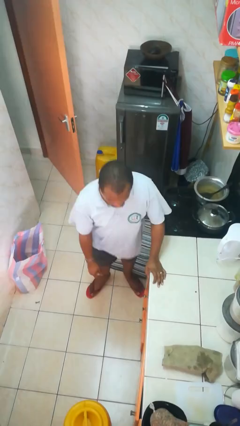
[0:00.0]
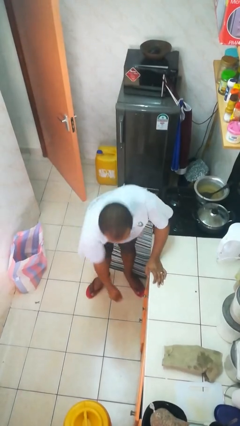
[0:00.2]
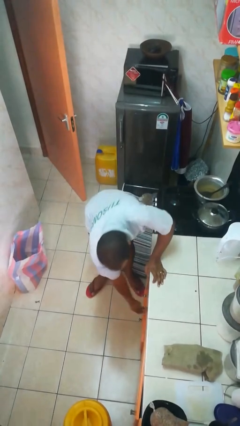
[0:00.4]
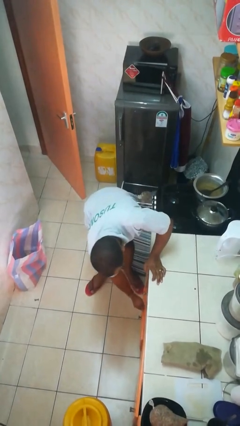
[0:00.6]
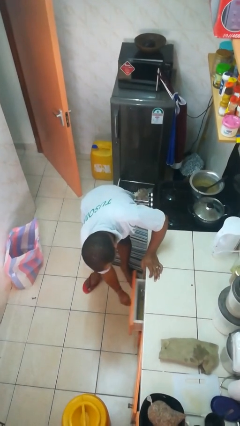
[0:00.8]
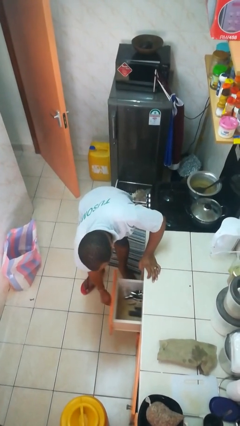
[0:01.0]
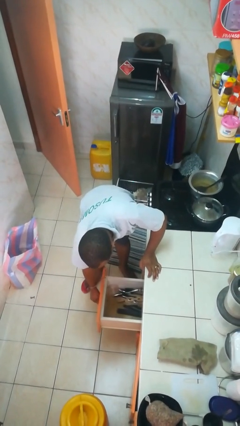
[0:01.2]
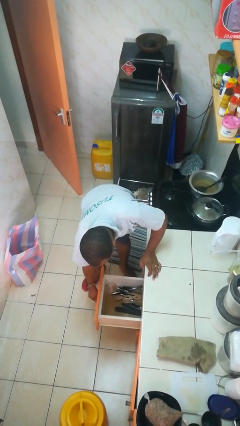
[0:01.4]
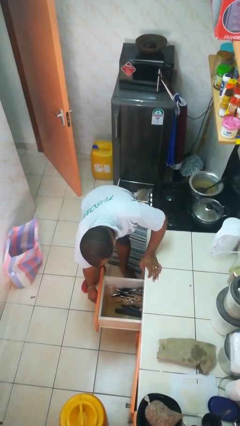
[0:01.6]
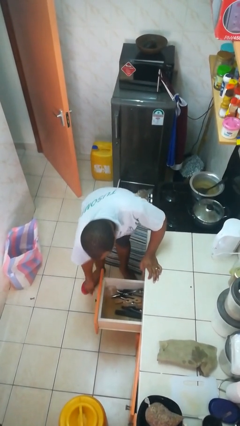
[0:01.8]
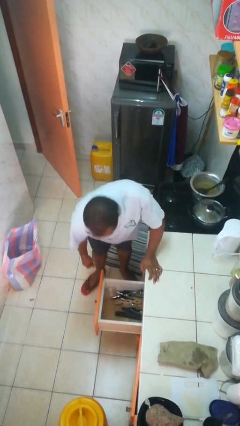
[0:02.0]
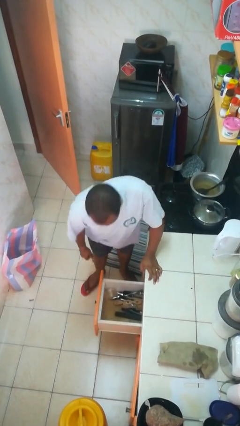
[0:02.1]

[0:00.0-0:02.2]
person opens kitchen drawer

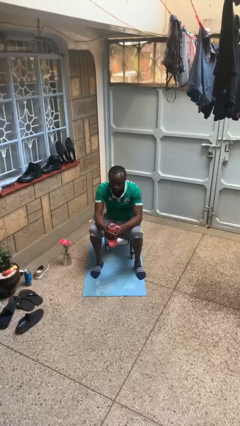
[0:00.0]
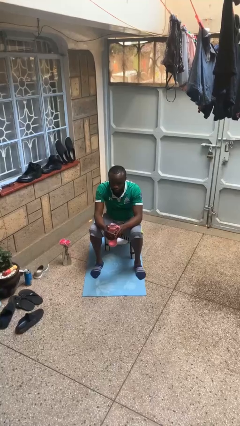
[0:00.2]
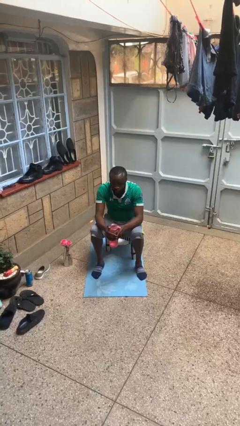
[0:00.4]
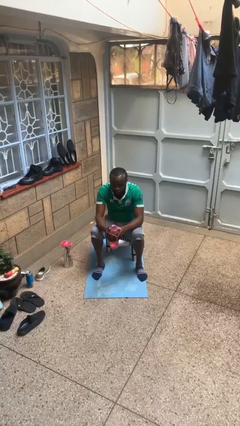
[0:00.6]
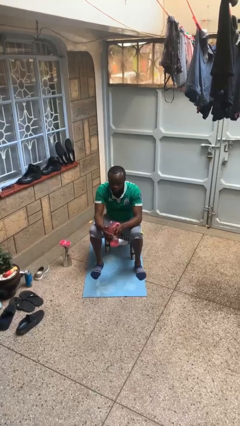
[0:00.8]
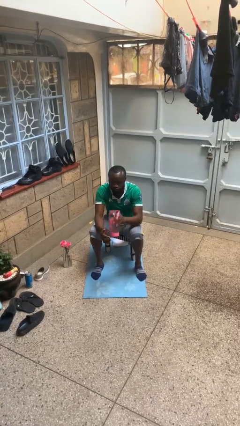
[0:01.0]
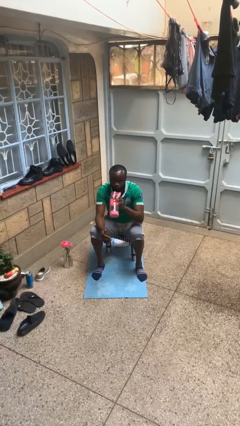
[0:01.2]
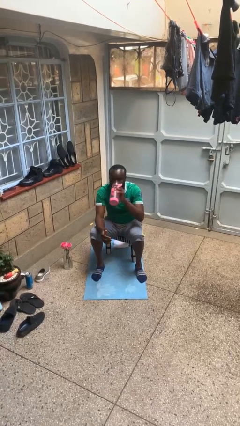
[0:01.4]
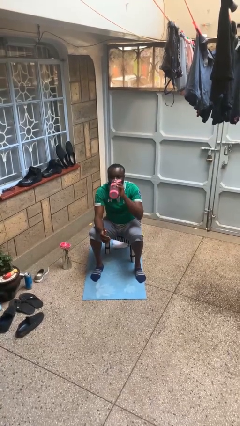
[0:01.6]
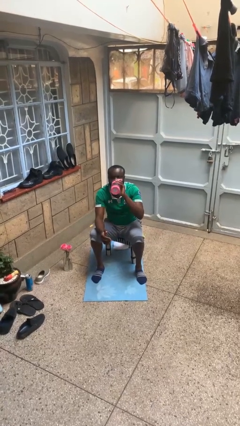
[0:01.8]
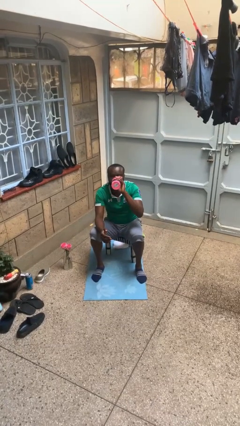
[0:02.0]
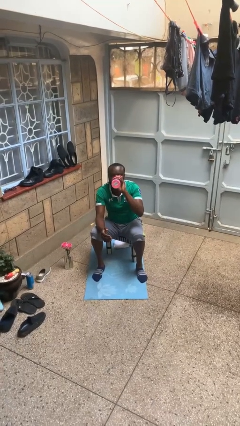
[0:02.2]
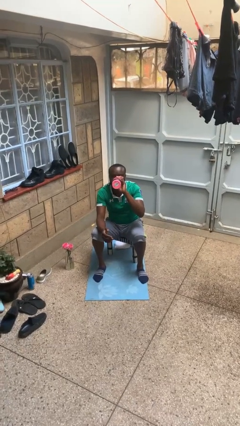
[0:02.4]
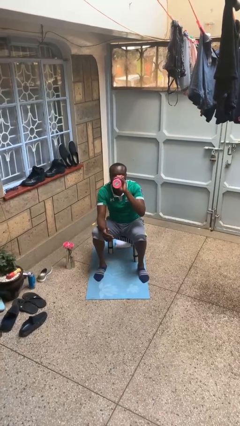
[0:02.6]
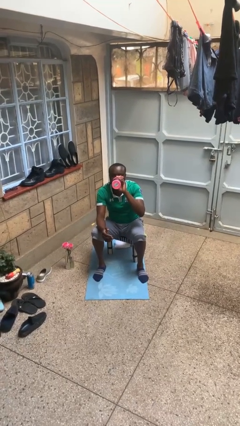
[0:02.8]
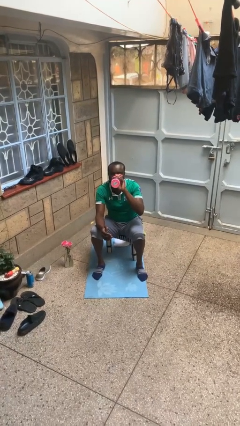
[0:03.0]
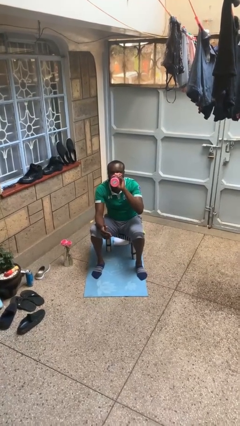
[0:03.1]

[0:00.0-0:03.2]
person drinks from bottle

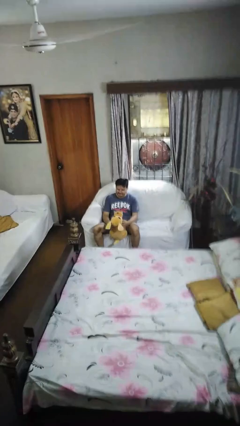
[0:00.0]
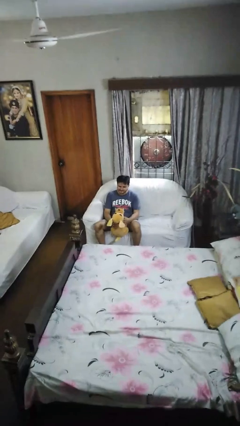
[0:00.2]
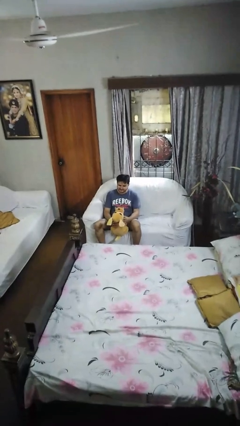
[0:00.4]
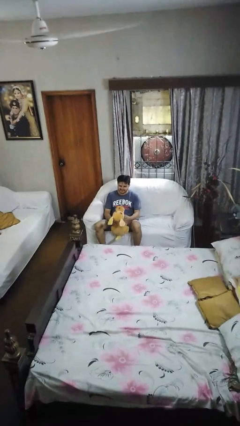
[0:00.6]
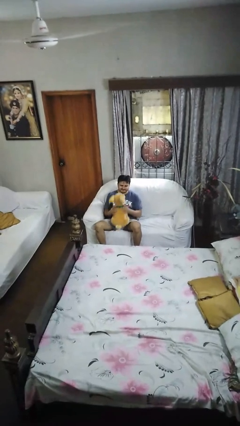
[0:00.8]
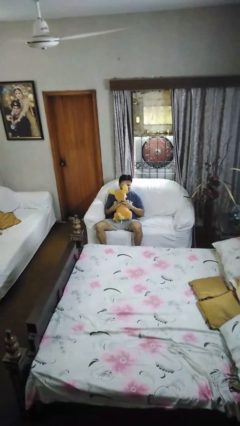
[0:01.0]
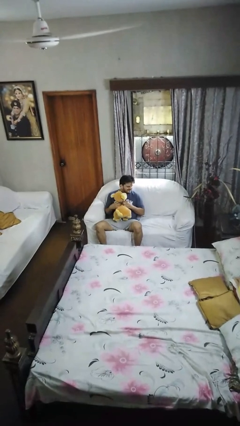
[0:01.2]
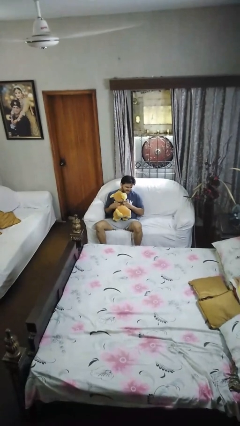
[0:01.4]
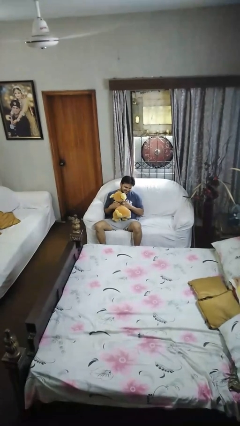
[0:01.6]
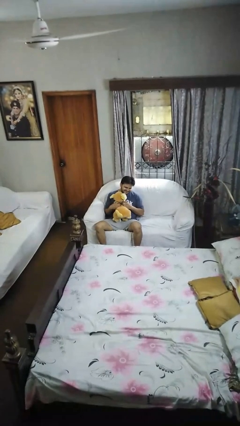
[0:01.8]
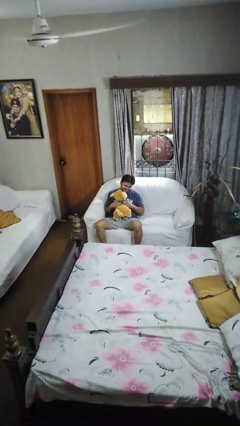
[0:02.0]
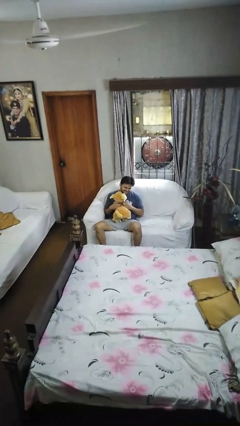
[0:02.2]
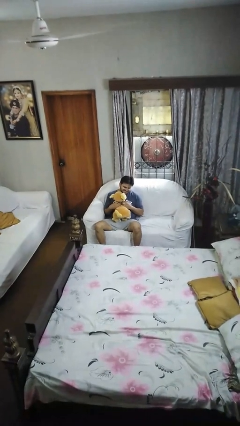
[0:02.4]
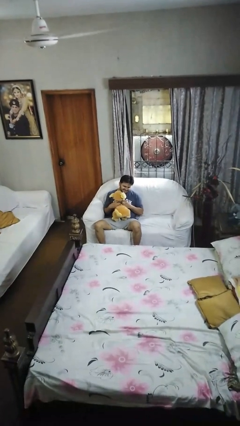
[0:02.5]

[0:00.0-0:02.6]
person hugs stuffed animal

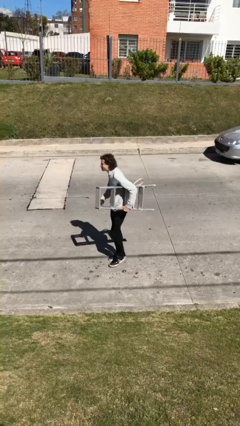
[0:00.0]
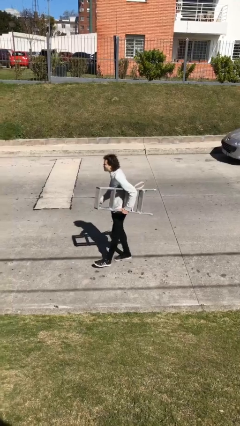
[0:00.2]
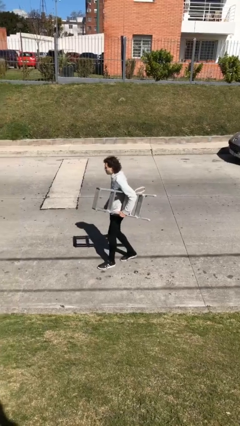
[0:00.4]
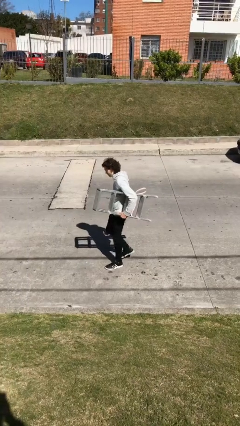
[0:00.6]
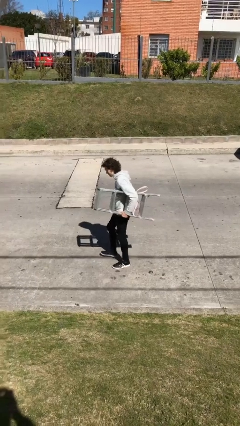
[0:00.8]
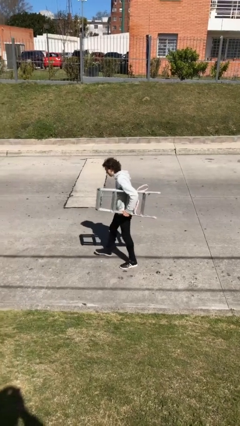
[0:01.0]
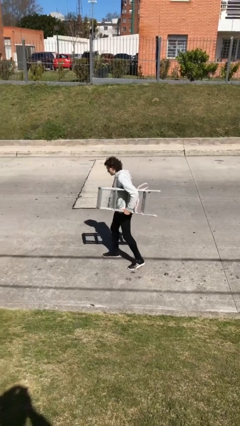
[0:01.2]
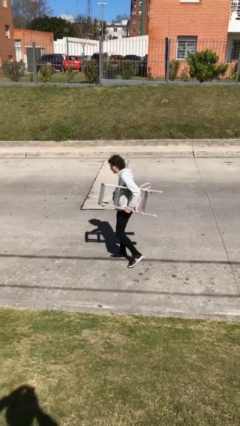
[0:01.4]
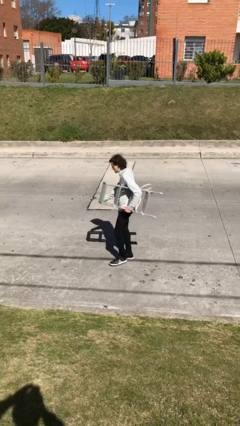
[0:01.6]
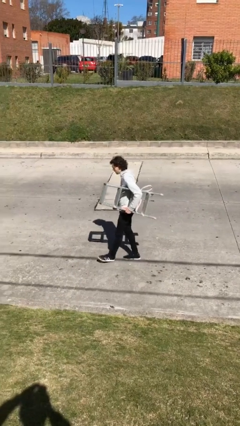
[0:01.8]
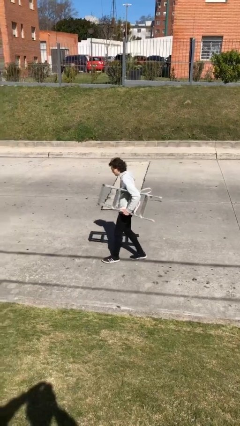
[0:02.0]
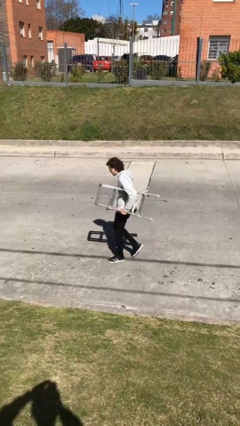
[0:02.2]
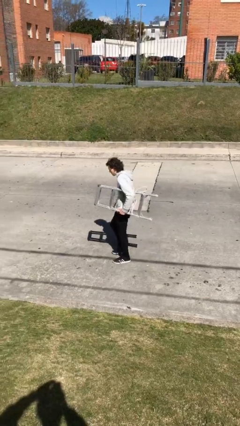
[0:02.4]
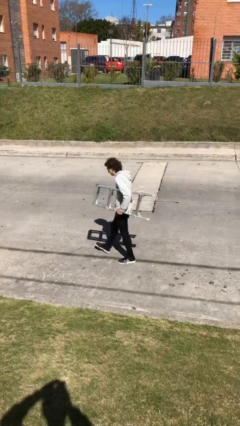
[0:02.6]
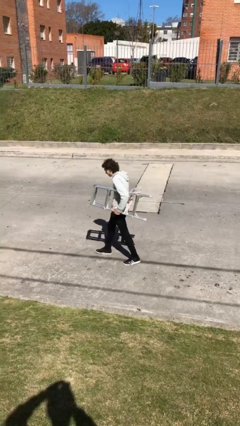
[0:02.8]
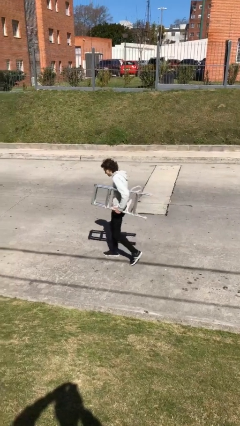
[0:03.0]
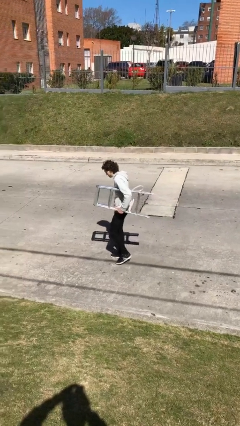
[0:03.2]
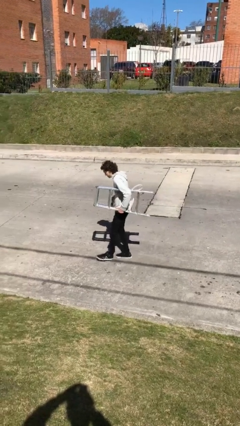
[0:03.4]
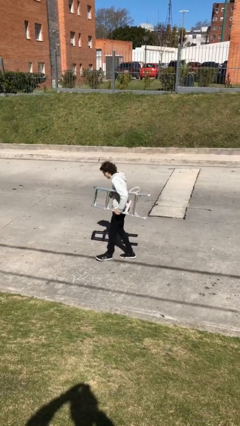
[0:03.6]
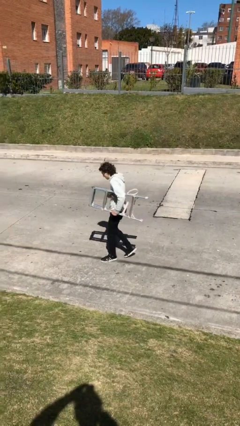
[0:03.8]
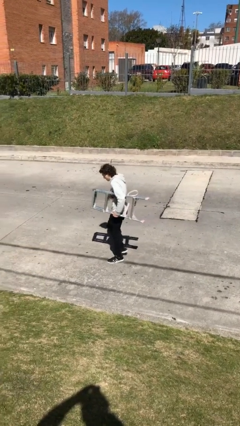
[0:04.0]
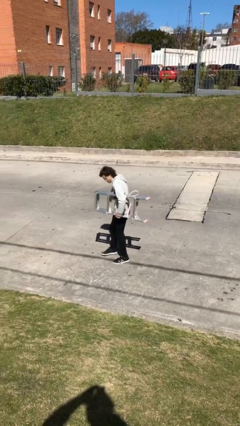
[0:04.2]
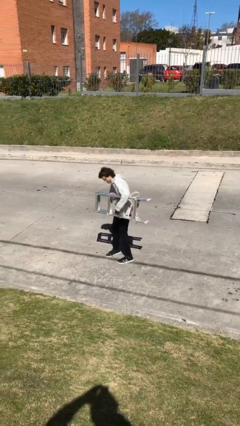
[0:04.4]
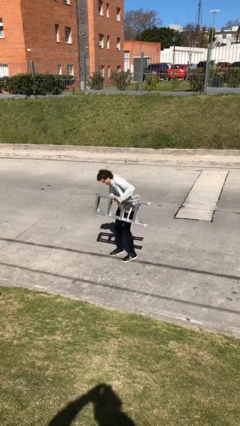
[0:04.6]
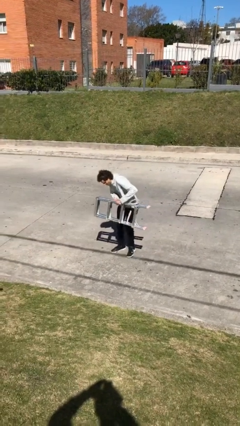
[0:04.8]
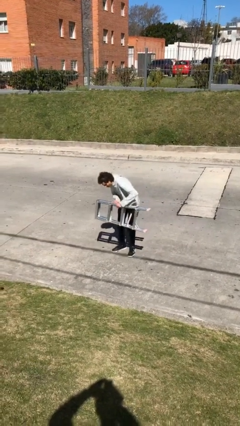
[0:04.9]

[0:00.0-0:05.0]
person carries heavy object

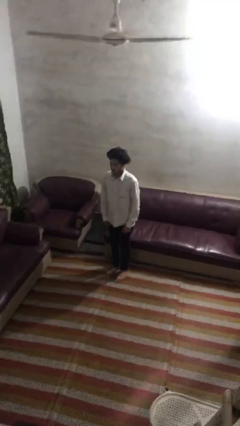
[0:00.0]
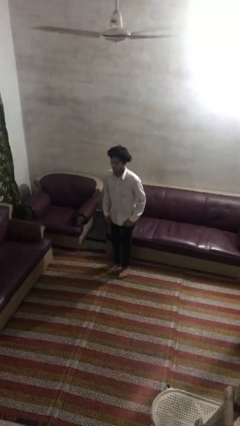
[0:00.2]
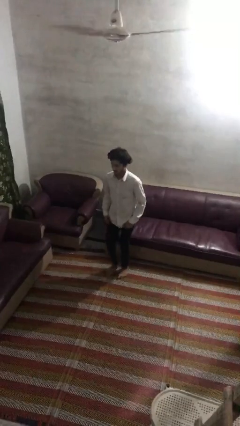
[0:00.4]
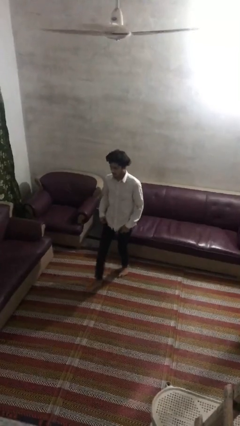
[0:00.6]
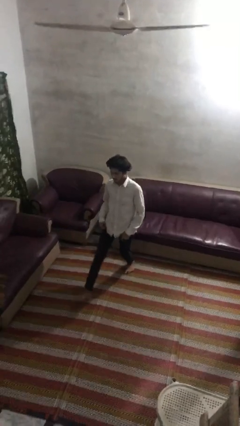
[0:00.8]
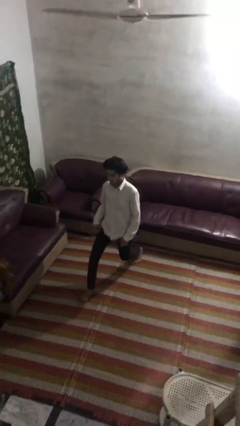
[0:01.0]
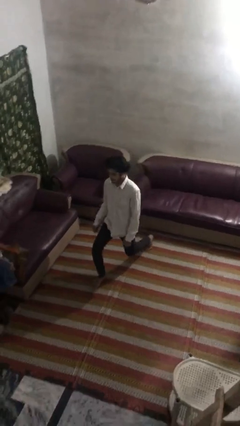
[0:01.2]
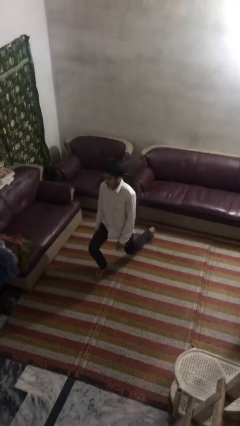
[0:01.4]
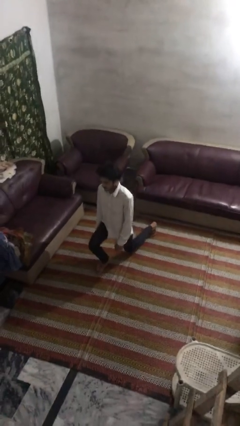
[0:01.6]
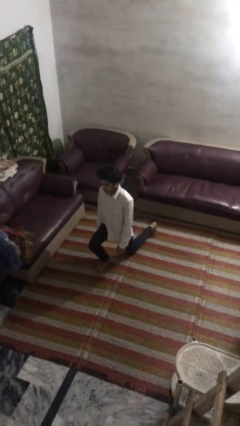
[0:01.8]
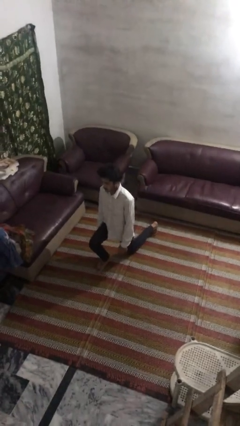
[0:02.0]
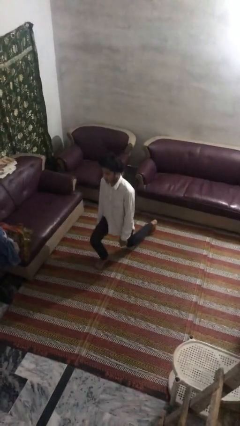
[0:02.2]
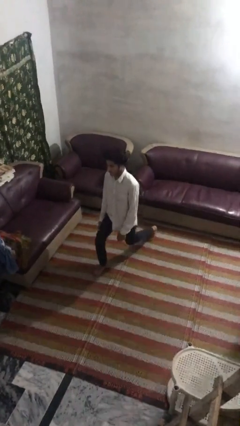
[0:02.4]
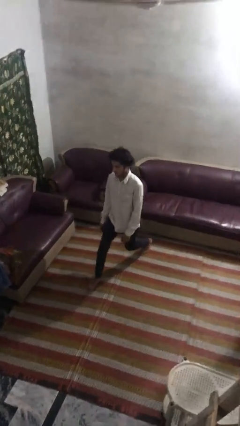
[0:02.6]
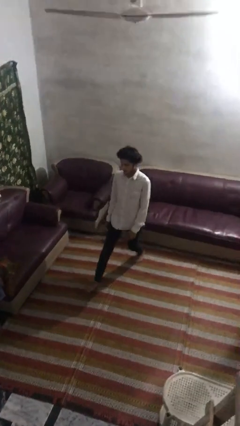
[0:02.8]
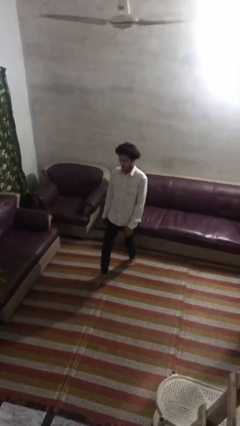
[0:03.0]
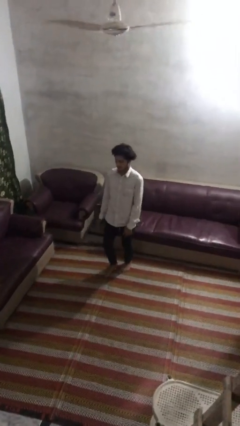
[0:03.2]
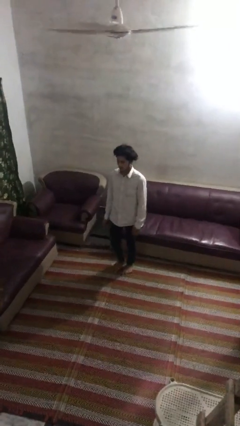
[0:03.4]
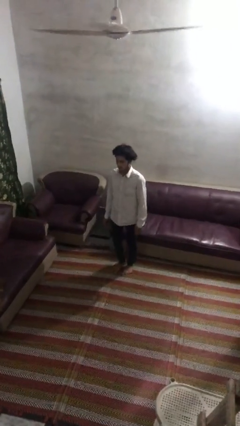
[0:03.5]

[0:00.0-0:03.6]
person exercises with lunges

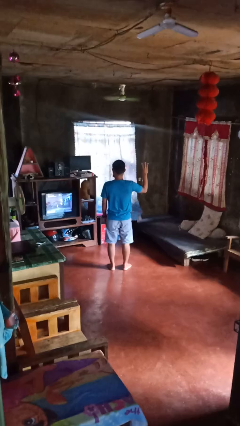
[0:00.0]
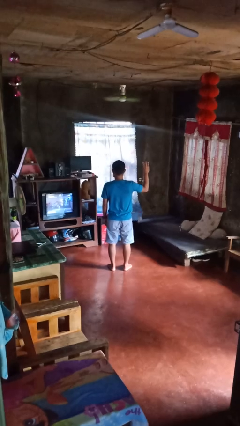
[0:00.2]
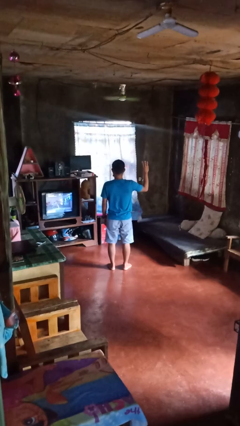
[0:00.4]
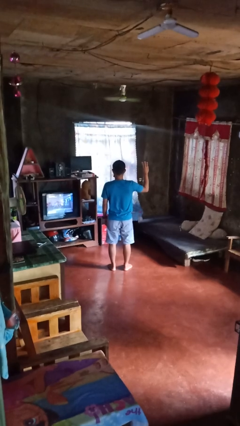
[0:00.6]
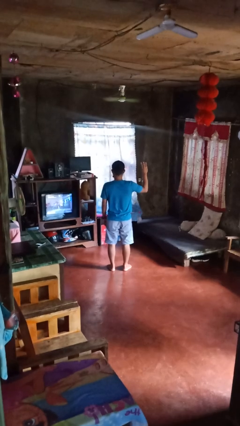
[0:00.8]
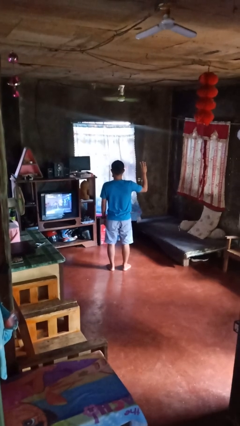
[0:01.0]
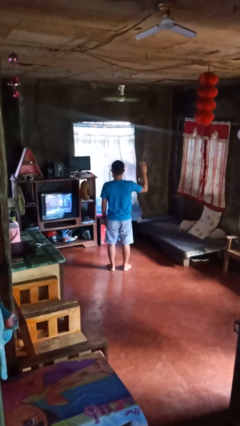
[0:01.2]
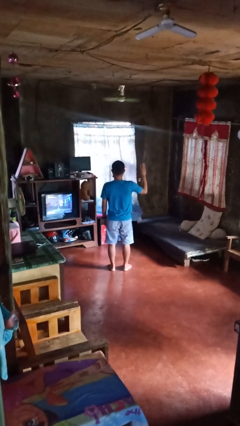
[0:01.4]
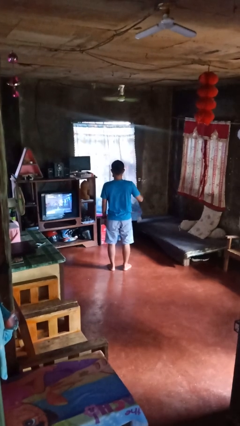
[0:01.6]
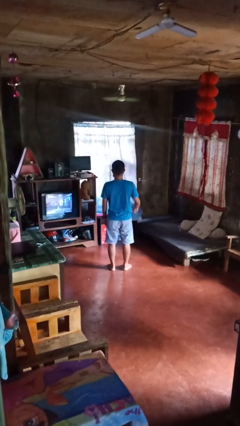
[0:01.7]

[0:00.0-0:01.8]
person gestures number three
